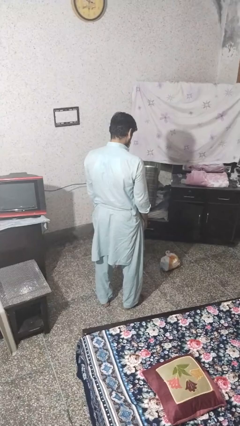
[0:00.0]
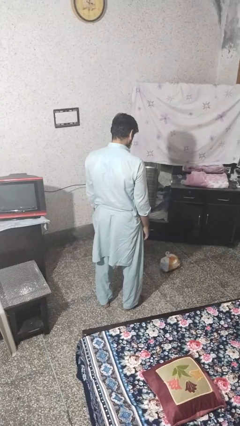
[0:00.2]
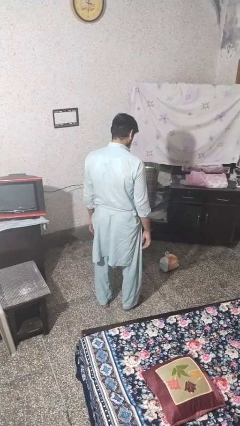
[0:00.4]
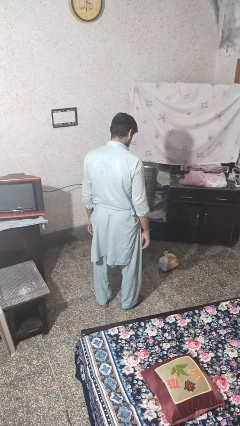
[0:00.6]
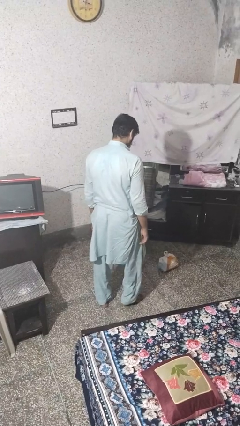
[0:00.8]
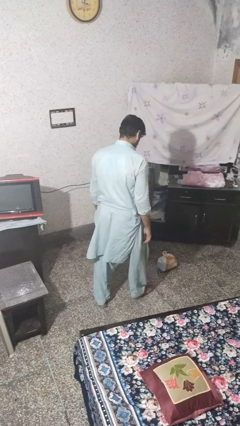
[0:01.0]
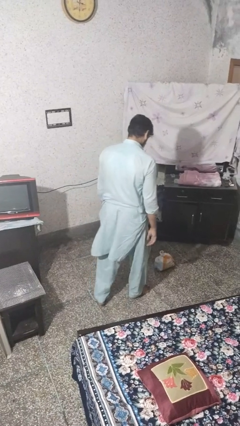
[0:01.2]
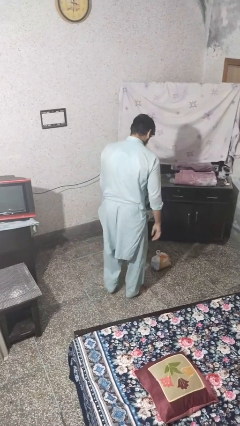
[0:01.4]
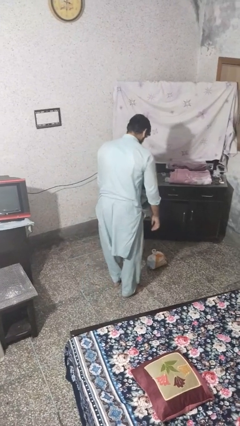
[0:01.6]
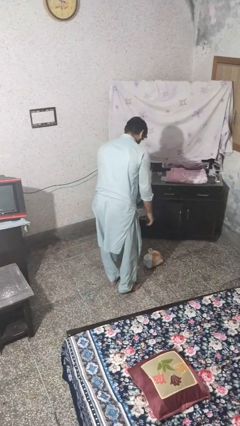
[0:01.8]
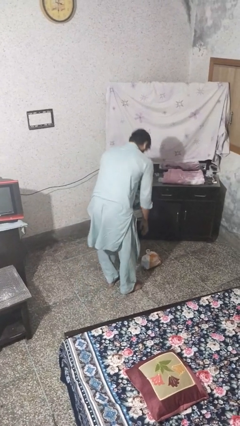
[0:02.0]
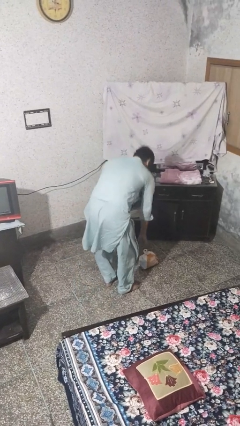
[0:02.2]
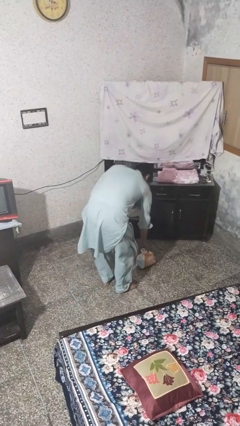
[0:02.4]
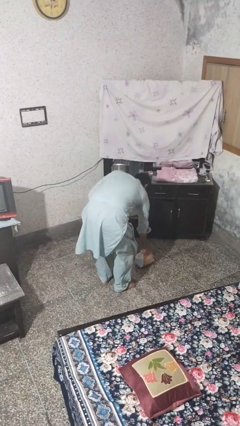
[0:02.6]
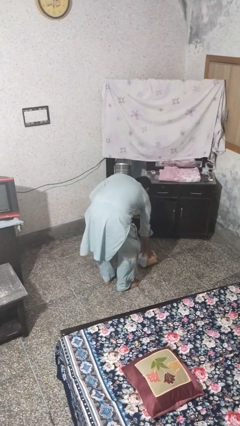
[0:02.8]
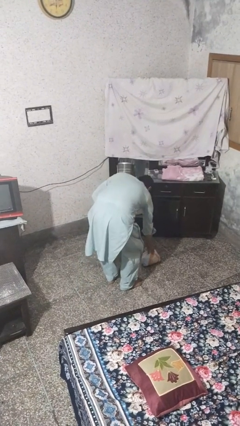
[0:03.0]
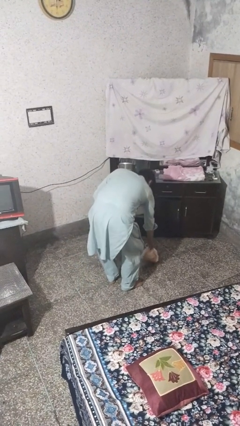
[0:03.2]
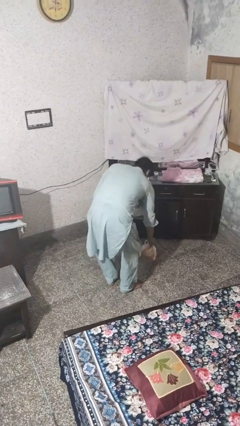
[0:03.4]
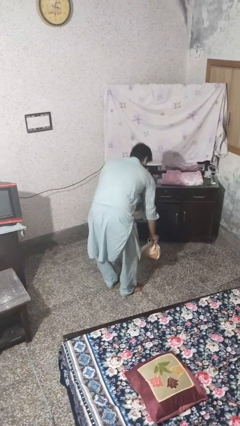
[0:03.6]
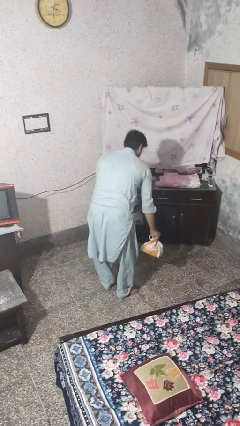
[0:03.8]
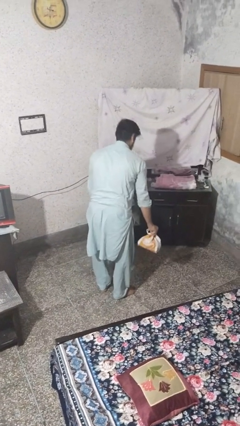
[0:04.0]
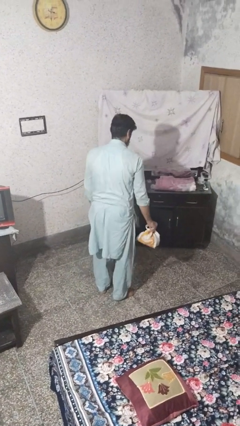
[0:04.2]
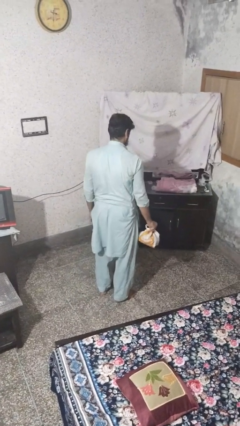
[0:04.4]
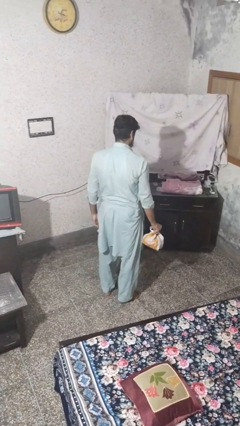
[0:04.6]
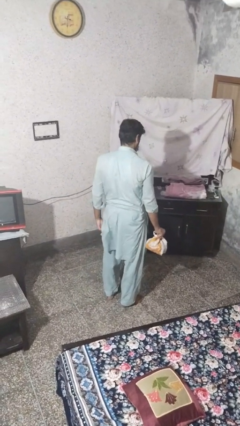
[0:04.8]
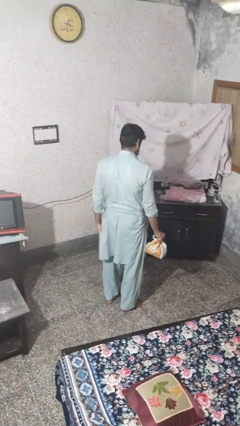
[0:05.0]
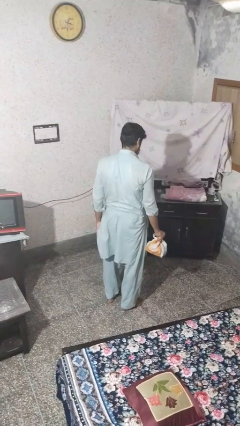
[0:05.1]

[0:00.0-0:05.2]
person picks up object from floor

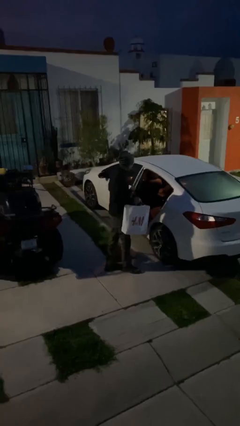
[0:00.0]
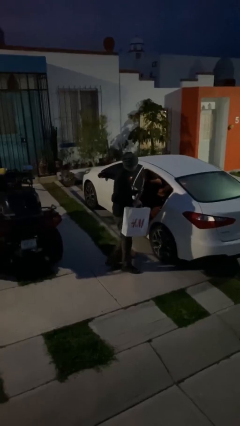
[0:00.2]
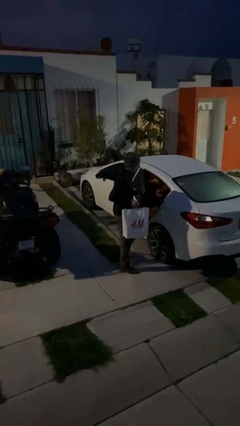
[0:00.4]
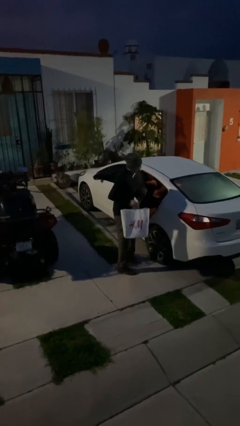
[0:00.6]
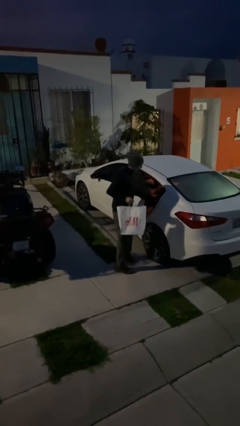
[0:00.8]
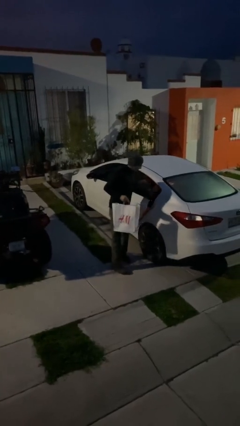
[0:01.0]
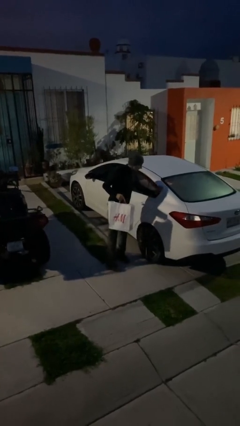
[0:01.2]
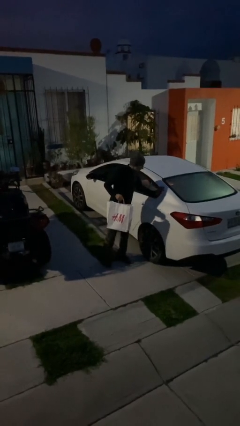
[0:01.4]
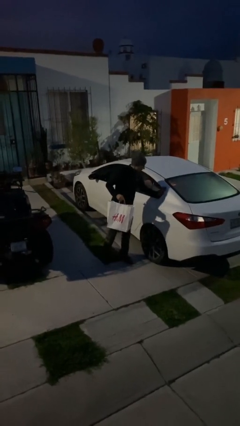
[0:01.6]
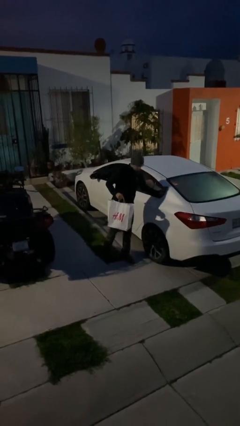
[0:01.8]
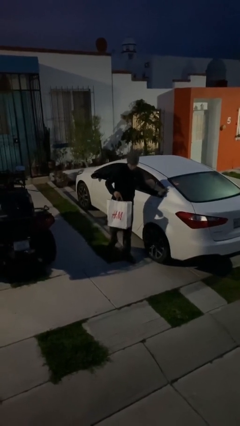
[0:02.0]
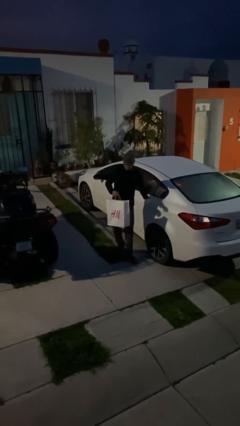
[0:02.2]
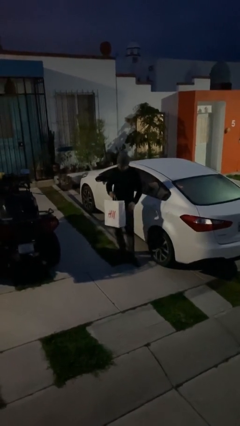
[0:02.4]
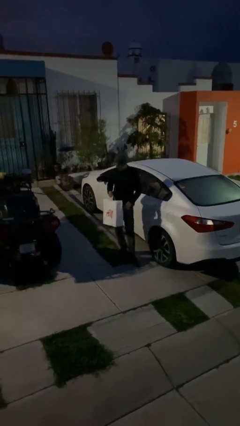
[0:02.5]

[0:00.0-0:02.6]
person closes car door

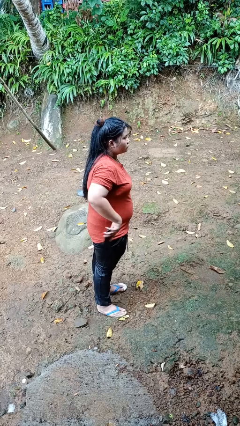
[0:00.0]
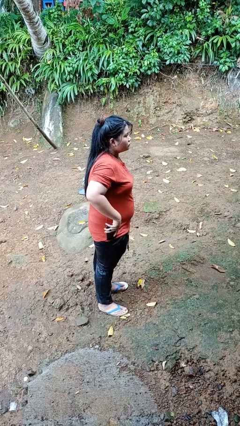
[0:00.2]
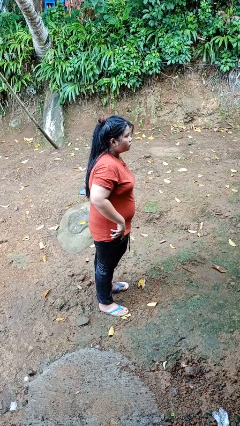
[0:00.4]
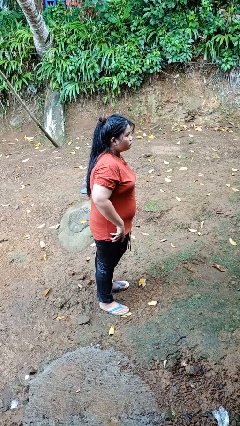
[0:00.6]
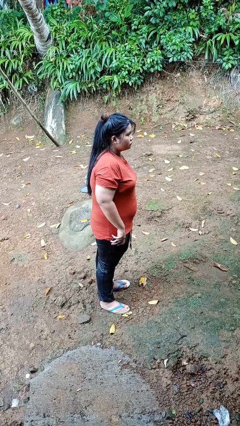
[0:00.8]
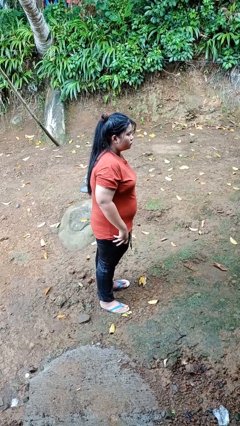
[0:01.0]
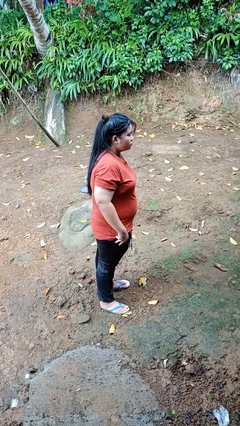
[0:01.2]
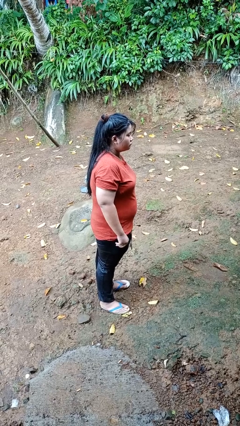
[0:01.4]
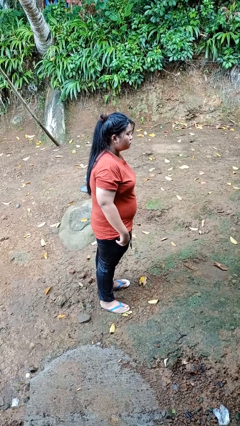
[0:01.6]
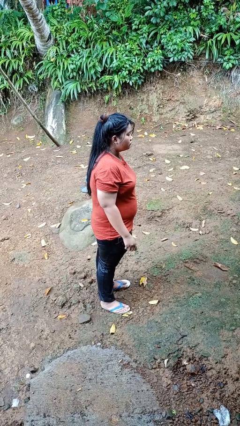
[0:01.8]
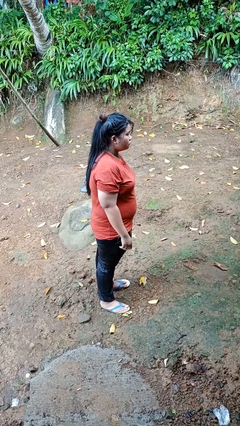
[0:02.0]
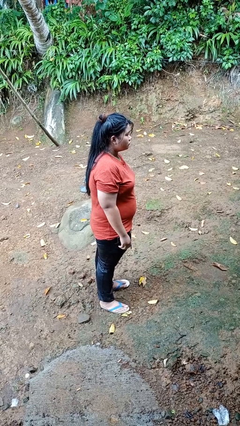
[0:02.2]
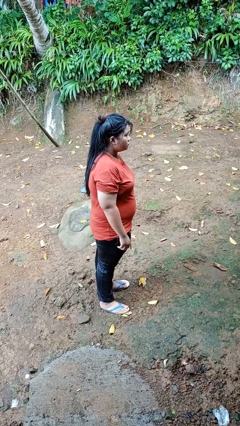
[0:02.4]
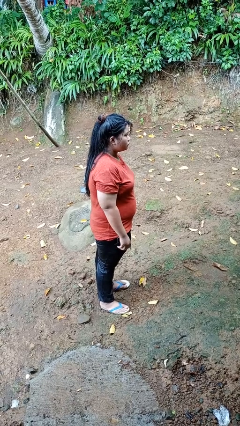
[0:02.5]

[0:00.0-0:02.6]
person puts phone into pocket

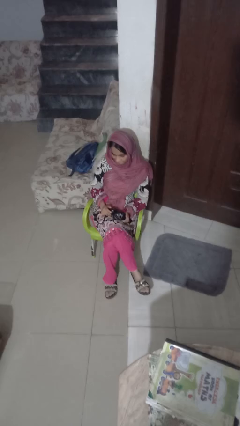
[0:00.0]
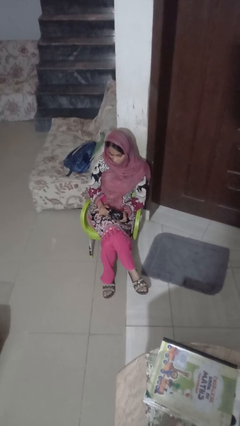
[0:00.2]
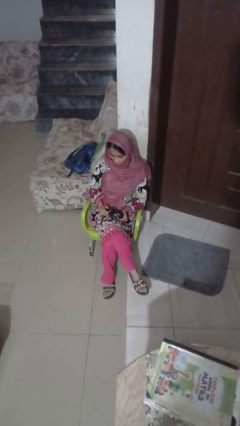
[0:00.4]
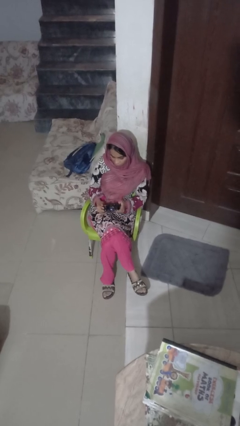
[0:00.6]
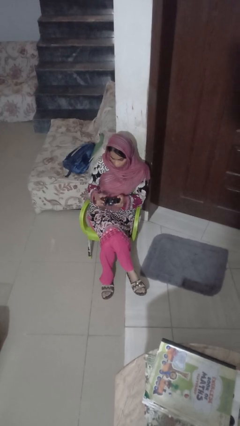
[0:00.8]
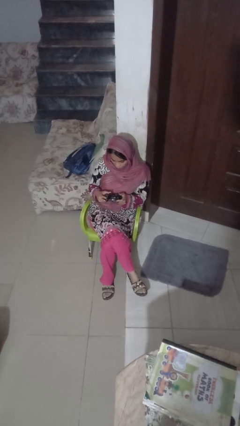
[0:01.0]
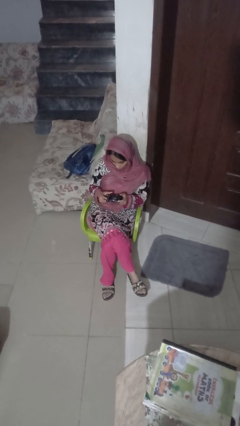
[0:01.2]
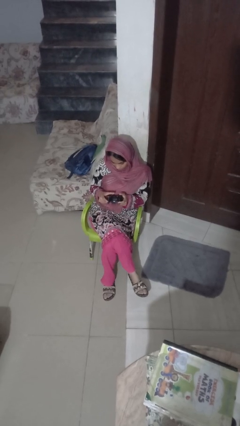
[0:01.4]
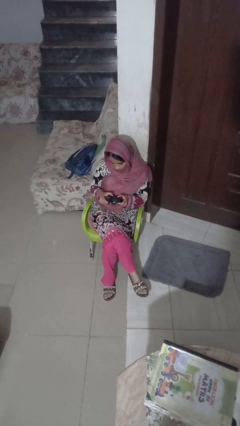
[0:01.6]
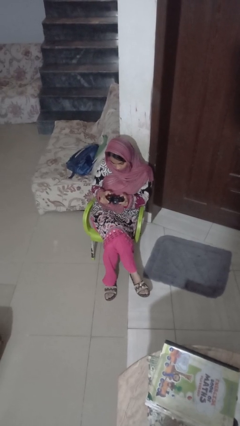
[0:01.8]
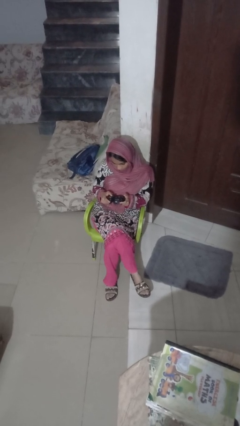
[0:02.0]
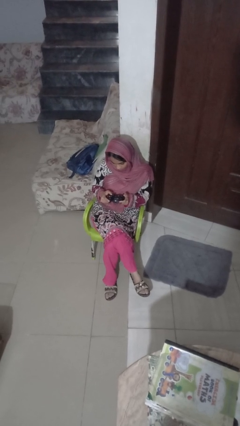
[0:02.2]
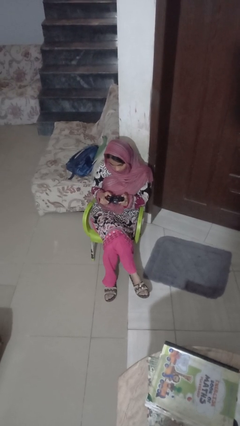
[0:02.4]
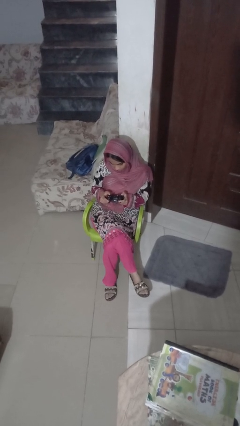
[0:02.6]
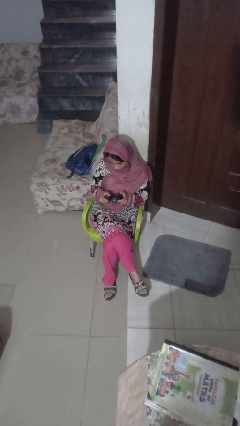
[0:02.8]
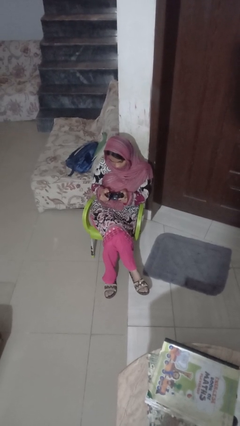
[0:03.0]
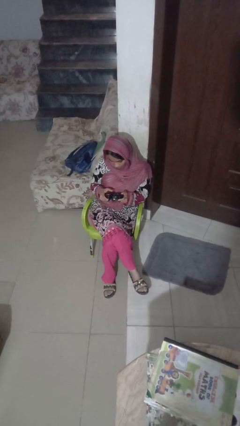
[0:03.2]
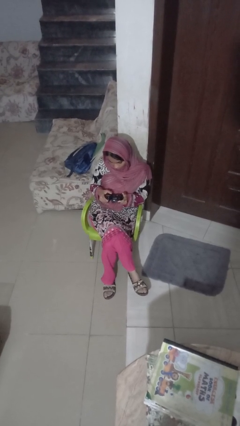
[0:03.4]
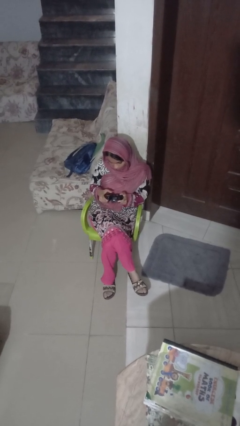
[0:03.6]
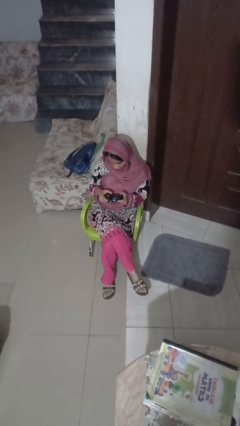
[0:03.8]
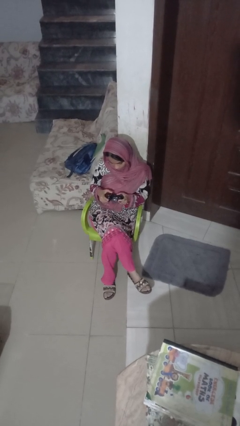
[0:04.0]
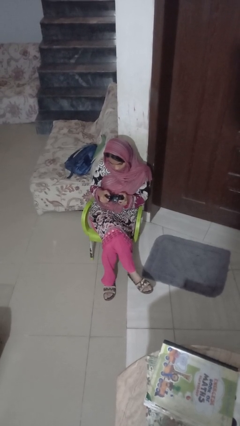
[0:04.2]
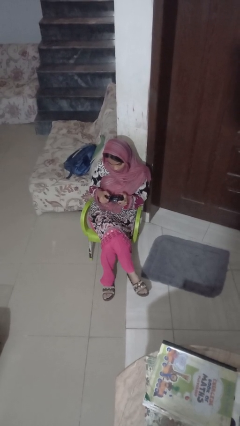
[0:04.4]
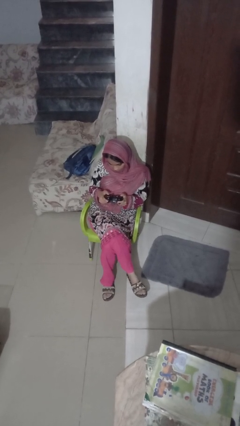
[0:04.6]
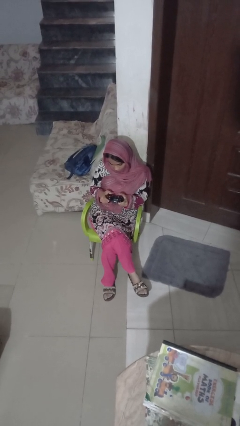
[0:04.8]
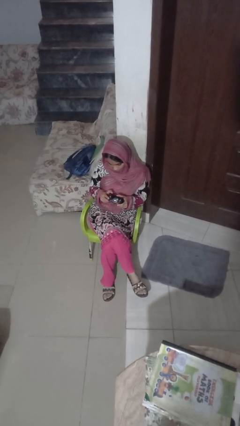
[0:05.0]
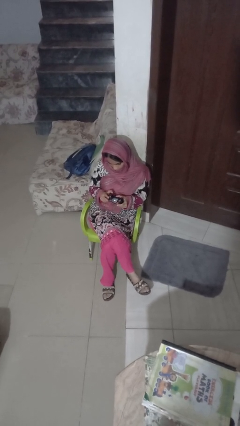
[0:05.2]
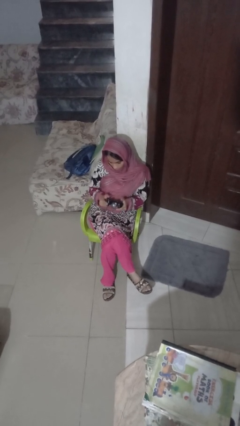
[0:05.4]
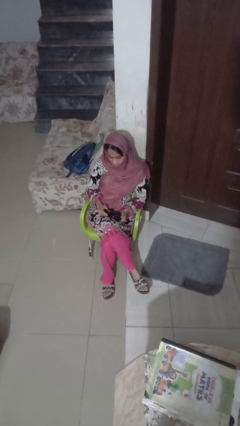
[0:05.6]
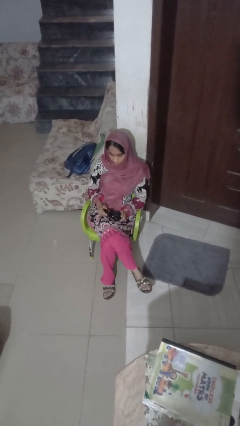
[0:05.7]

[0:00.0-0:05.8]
person interacts with handheld game

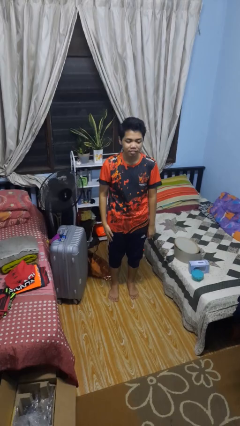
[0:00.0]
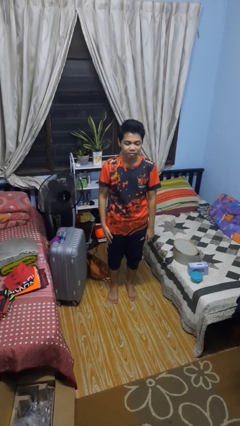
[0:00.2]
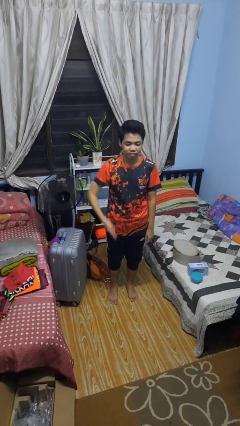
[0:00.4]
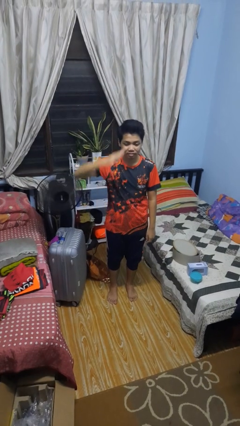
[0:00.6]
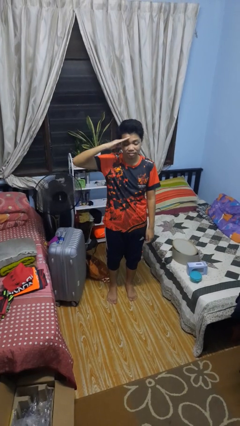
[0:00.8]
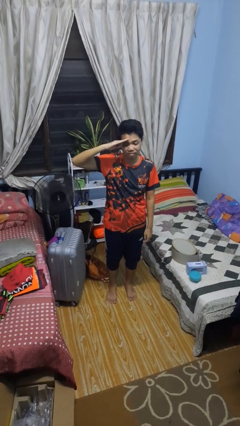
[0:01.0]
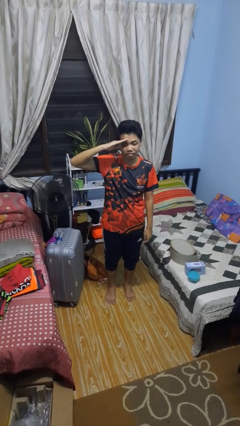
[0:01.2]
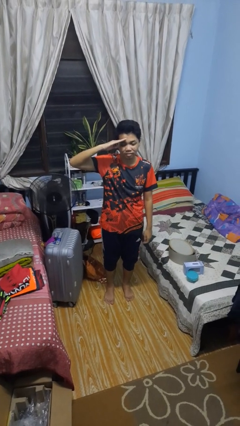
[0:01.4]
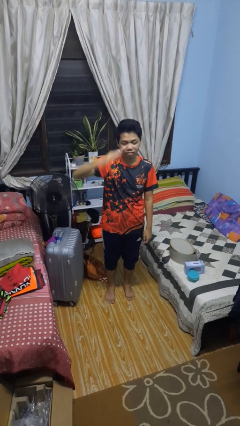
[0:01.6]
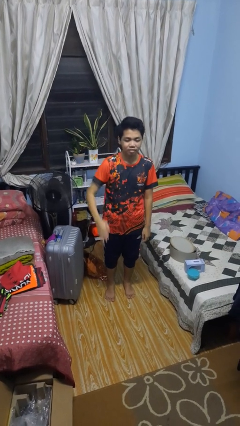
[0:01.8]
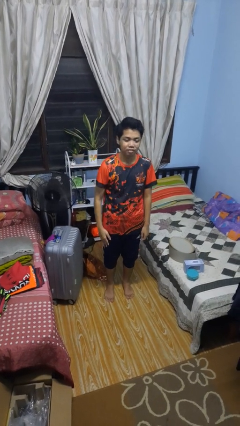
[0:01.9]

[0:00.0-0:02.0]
person salutes
